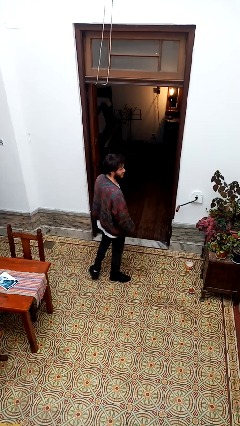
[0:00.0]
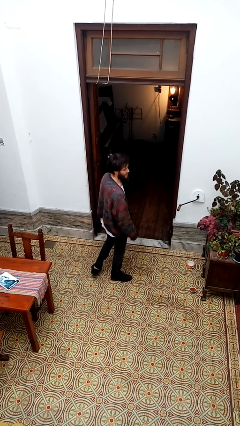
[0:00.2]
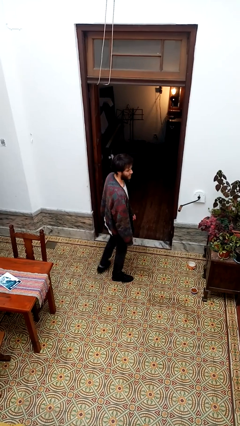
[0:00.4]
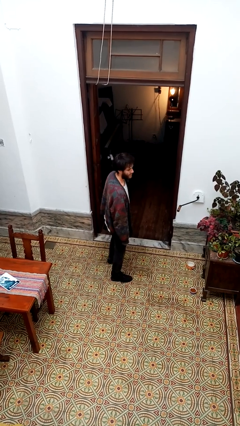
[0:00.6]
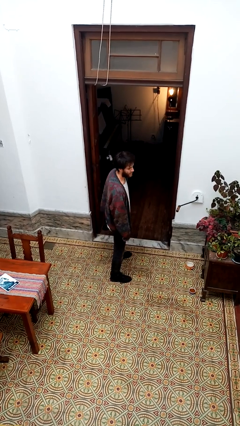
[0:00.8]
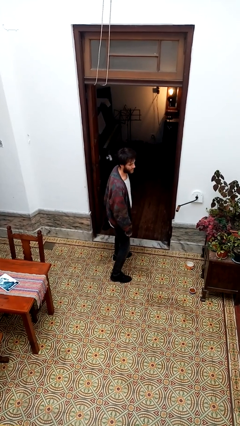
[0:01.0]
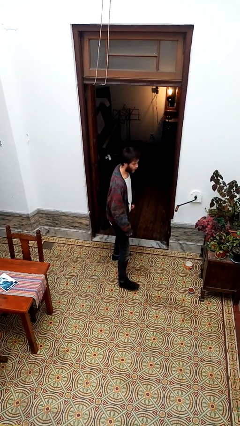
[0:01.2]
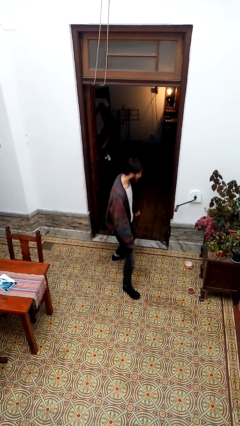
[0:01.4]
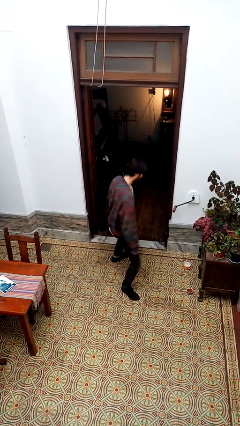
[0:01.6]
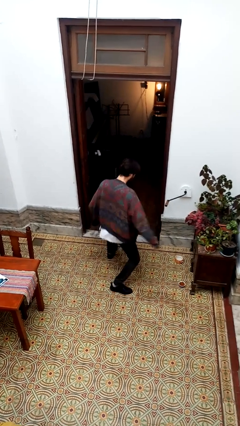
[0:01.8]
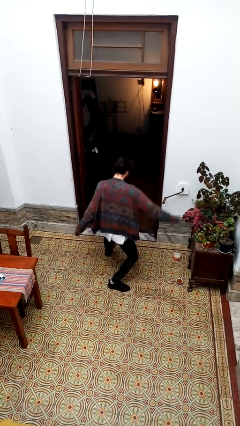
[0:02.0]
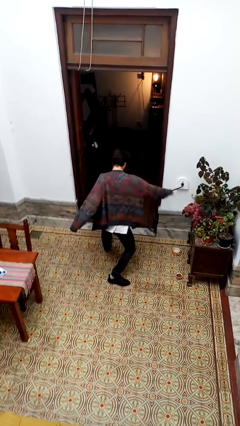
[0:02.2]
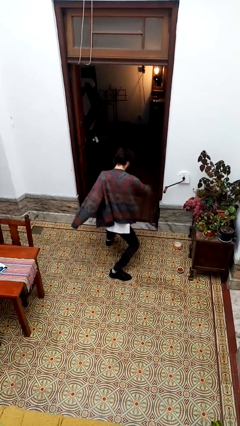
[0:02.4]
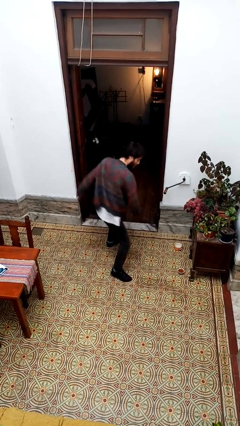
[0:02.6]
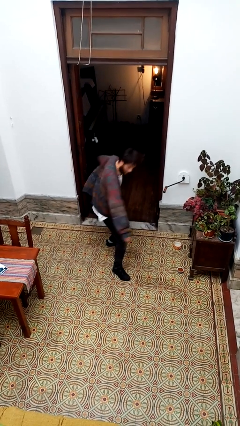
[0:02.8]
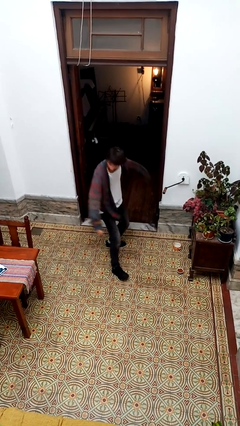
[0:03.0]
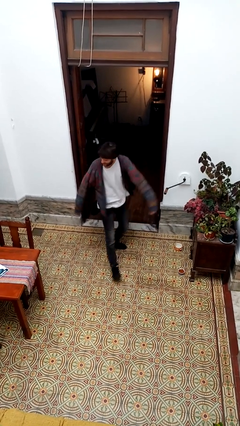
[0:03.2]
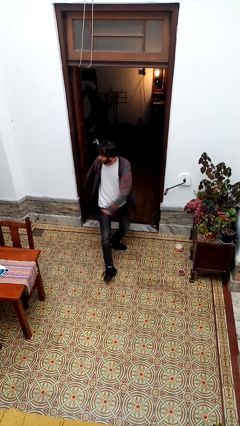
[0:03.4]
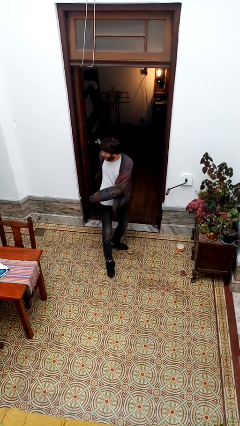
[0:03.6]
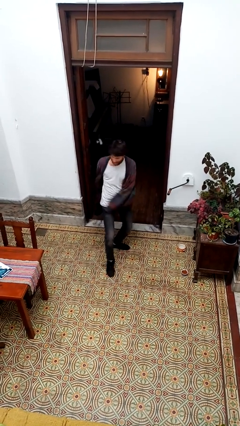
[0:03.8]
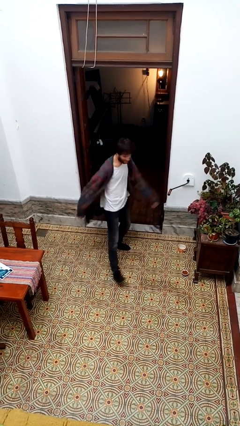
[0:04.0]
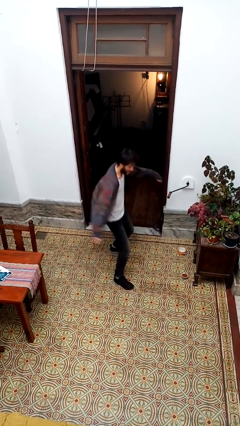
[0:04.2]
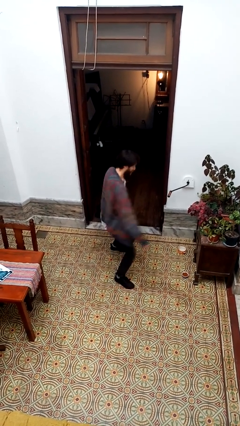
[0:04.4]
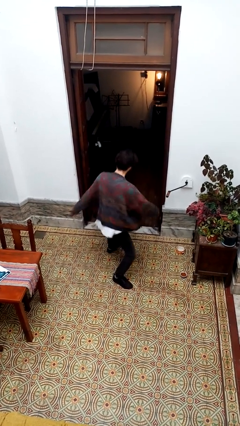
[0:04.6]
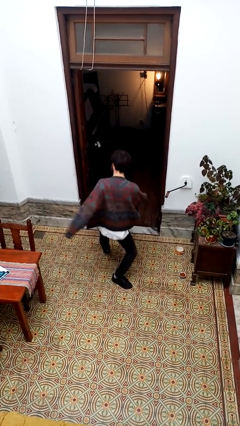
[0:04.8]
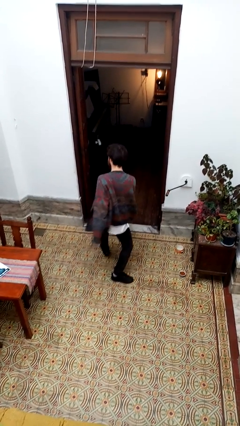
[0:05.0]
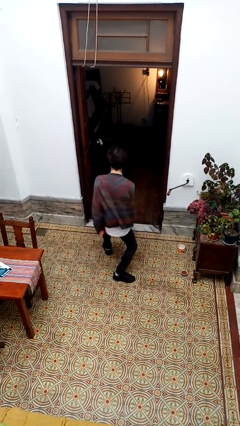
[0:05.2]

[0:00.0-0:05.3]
person dances in place

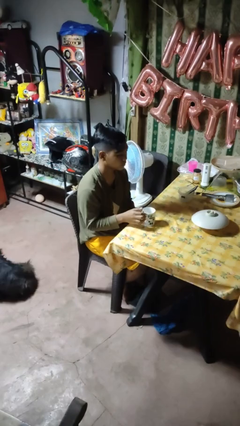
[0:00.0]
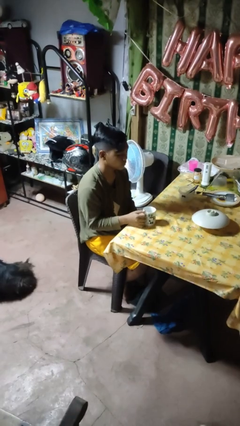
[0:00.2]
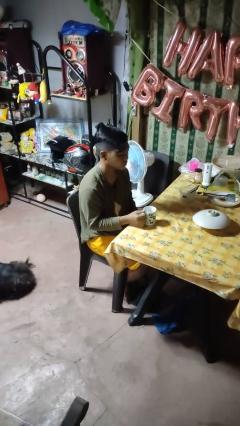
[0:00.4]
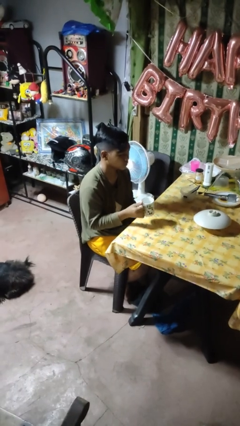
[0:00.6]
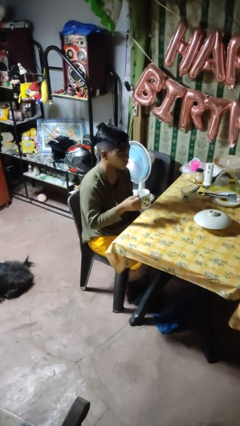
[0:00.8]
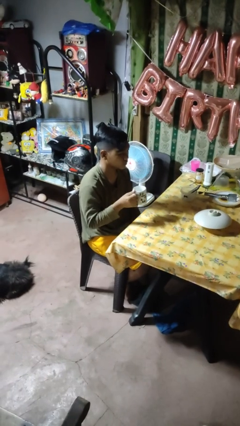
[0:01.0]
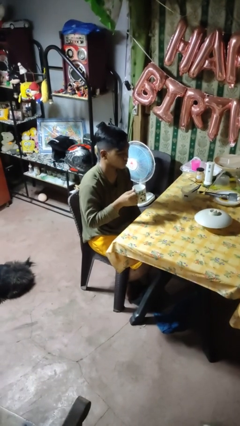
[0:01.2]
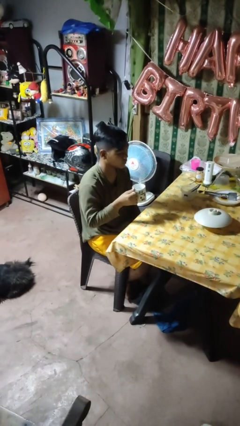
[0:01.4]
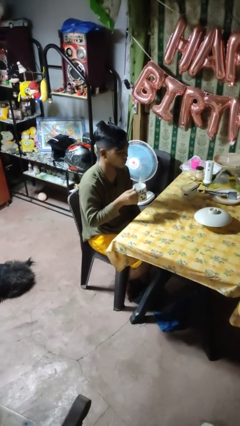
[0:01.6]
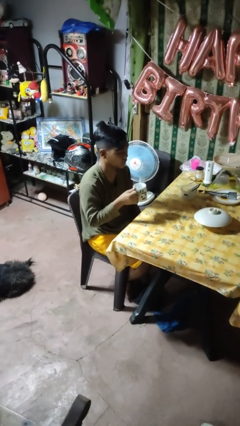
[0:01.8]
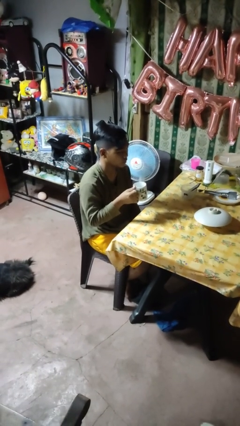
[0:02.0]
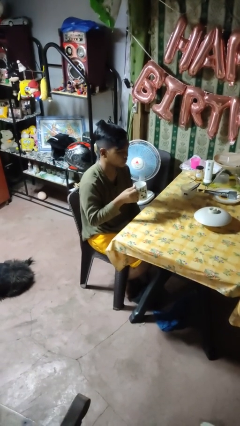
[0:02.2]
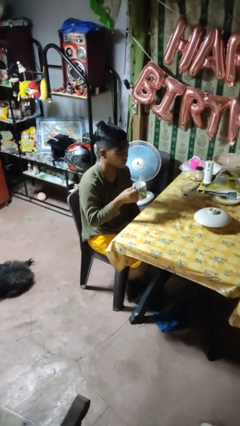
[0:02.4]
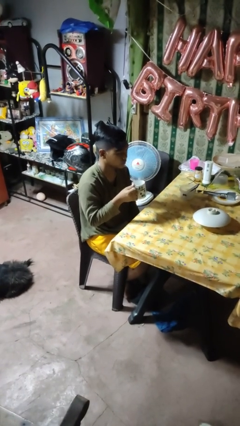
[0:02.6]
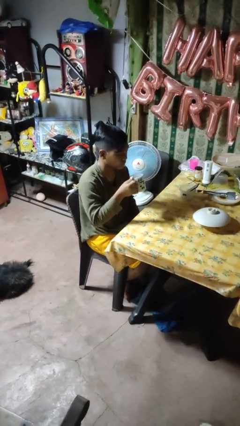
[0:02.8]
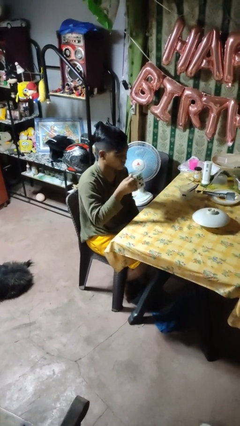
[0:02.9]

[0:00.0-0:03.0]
person picks up object from table

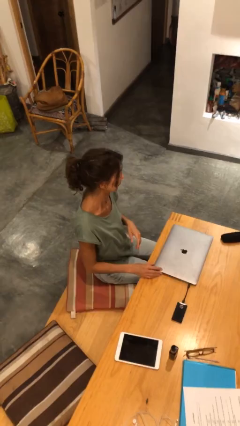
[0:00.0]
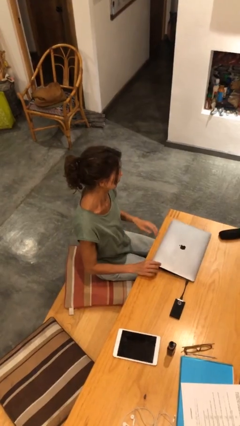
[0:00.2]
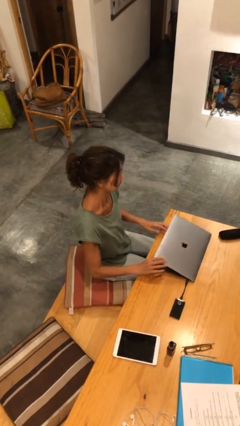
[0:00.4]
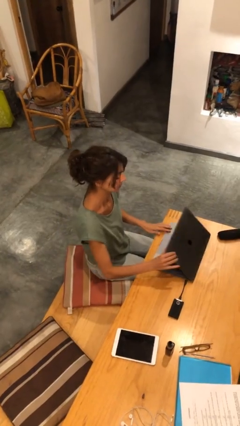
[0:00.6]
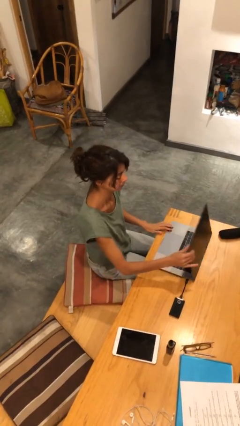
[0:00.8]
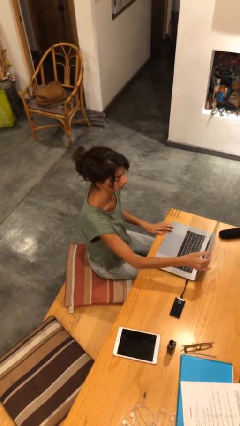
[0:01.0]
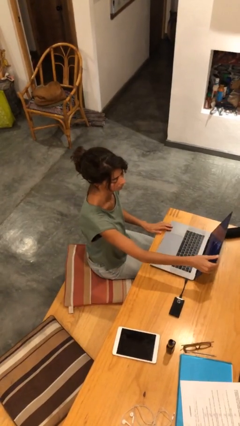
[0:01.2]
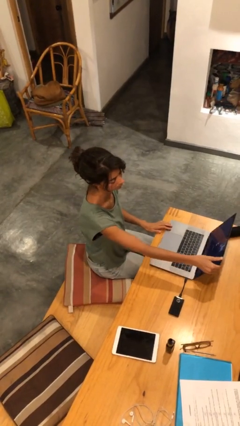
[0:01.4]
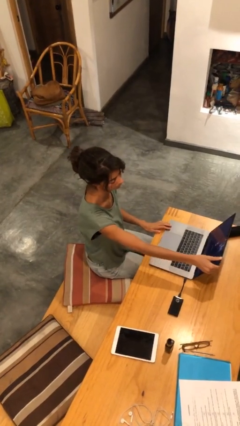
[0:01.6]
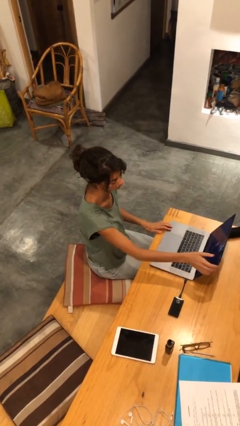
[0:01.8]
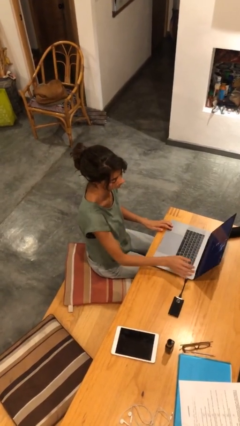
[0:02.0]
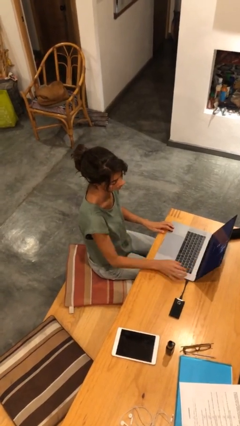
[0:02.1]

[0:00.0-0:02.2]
person opens laptop

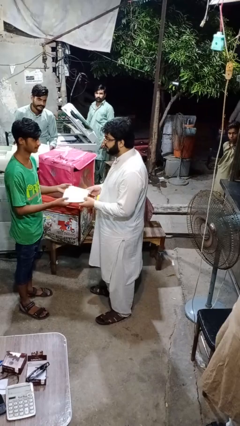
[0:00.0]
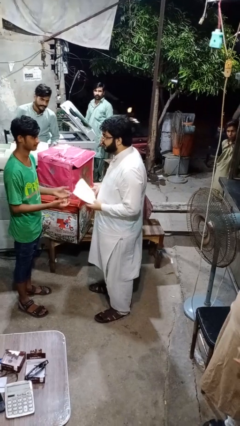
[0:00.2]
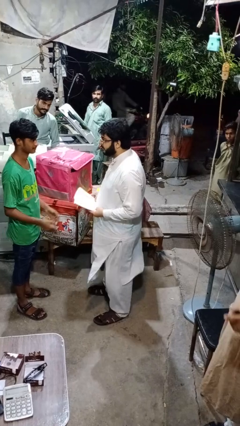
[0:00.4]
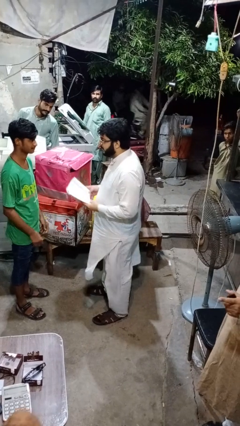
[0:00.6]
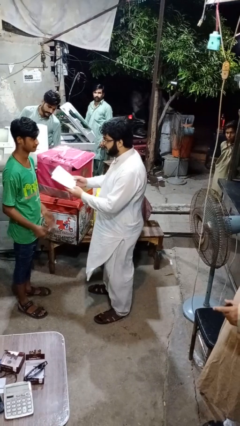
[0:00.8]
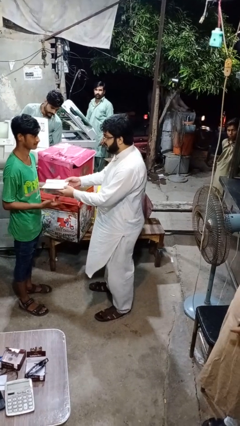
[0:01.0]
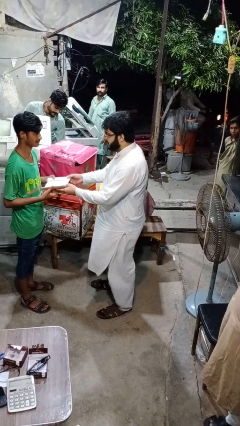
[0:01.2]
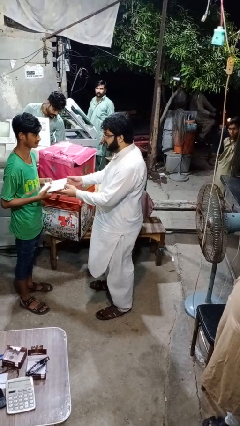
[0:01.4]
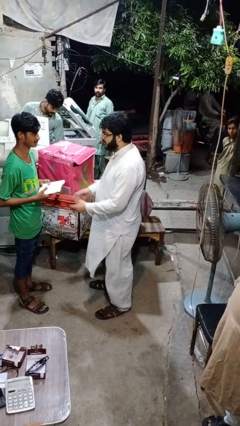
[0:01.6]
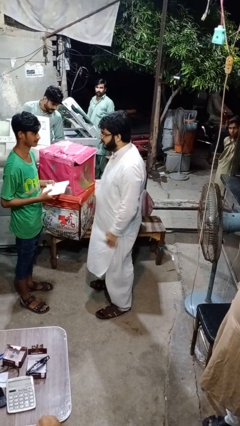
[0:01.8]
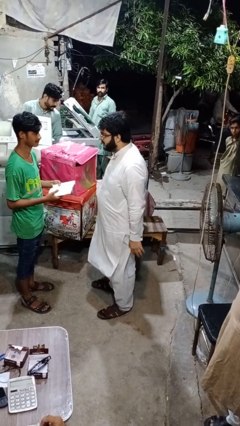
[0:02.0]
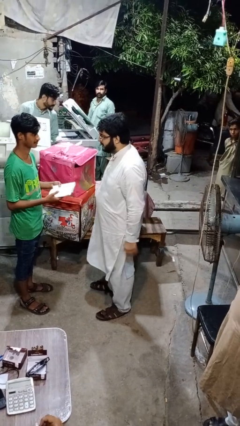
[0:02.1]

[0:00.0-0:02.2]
person transfers object to person

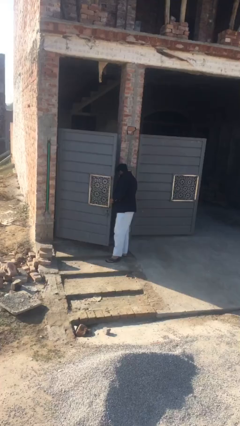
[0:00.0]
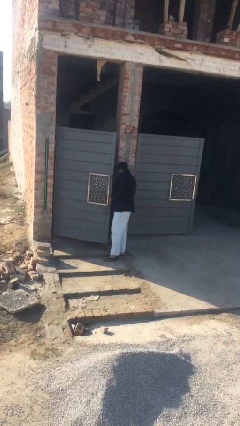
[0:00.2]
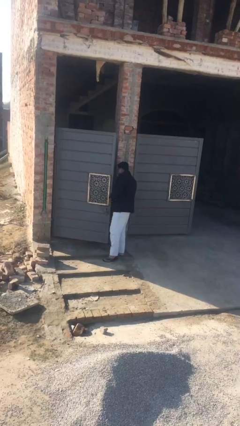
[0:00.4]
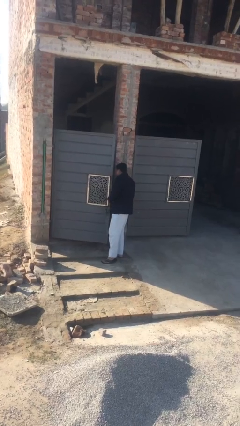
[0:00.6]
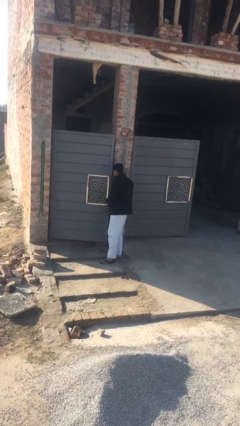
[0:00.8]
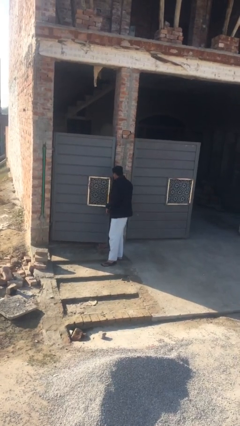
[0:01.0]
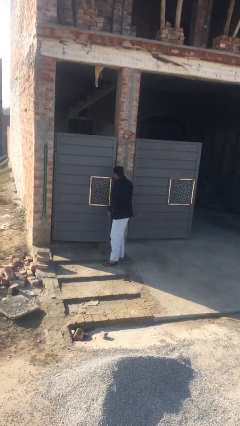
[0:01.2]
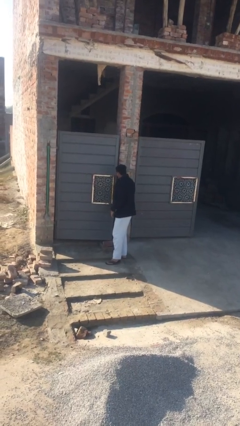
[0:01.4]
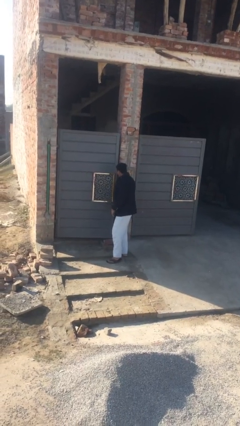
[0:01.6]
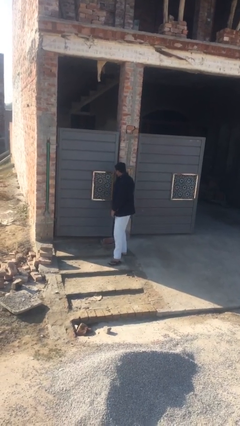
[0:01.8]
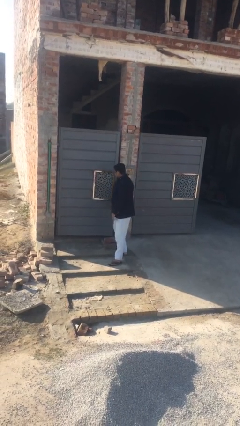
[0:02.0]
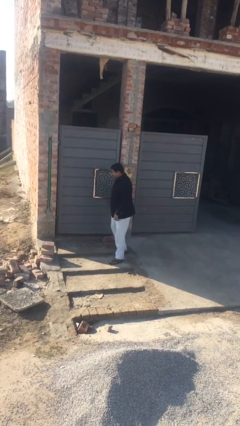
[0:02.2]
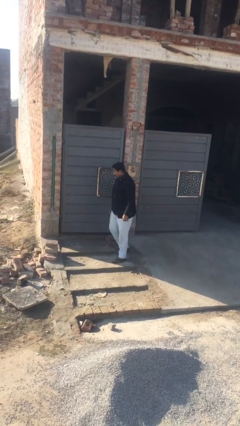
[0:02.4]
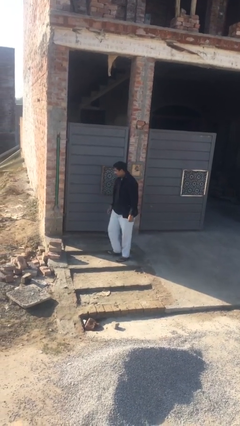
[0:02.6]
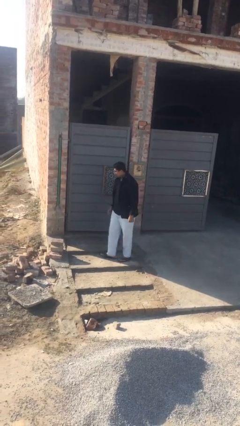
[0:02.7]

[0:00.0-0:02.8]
person closes facility door

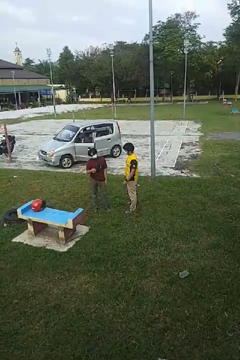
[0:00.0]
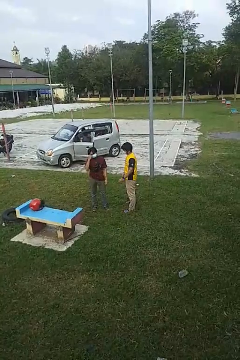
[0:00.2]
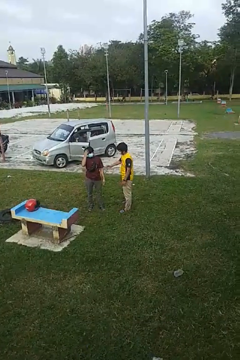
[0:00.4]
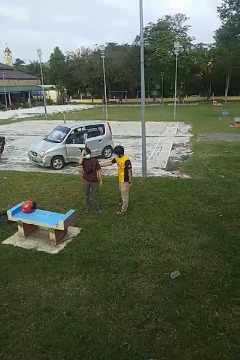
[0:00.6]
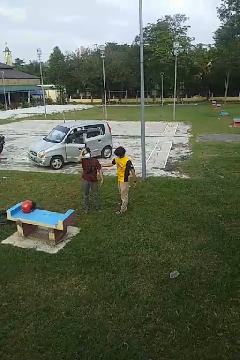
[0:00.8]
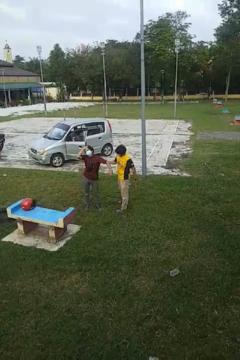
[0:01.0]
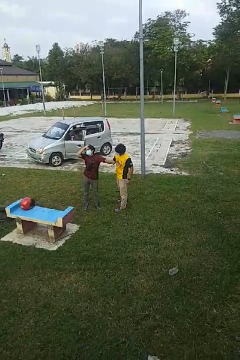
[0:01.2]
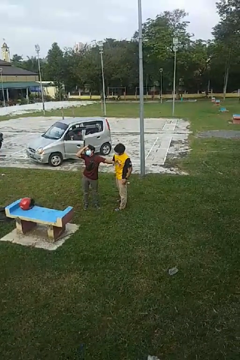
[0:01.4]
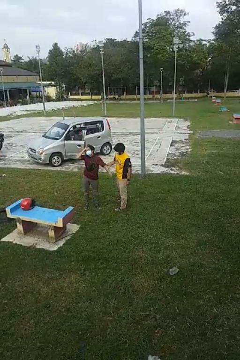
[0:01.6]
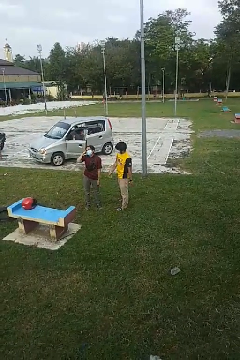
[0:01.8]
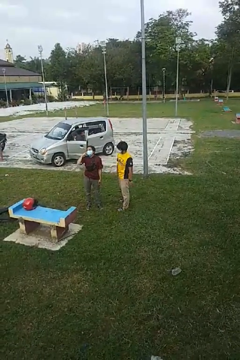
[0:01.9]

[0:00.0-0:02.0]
person grabs person by bicep

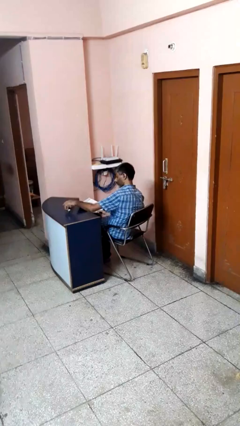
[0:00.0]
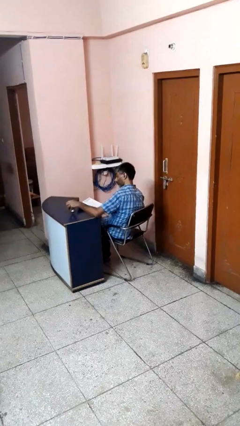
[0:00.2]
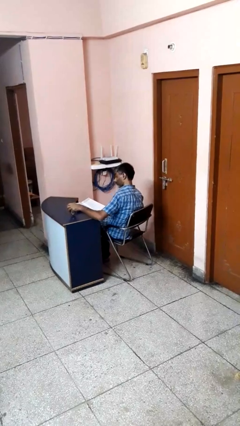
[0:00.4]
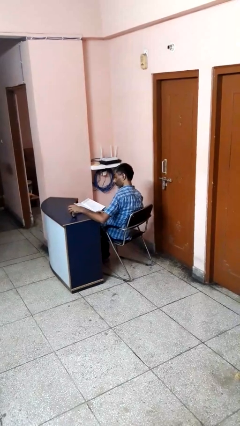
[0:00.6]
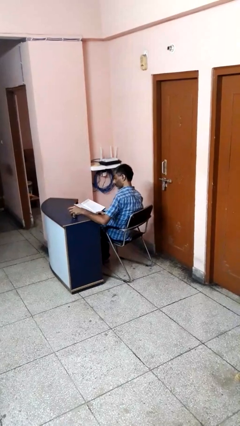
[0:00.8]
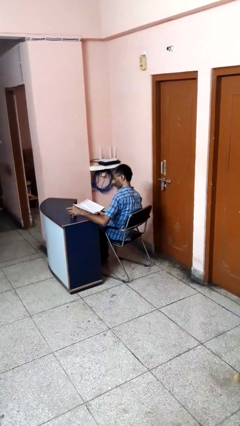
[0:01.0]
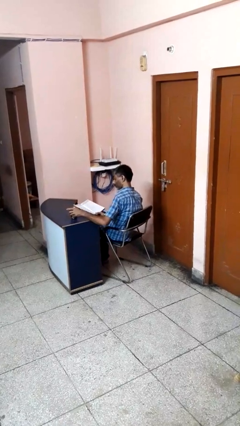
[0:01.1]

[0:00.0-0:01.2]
person sets upright glass
